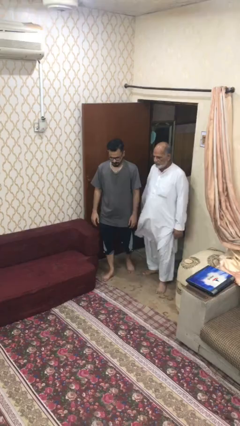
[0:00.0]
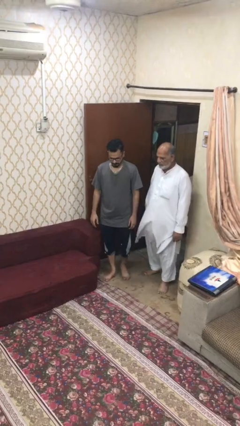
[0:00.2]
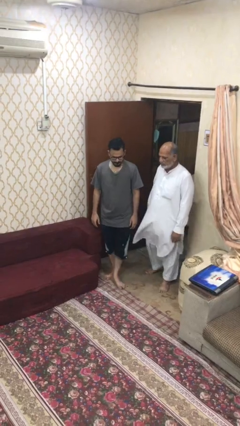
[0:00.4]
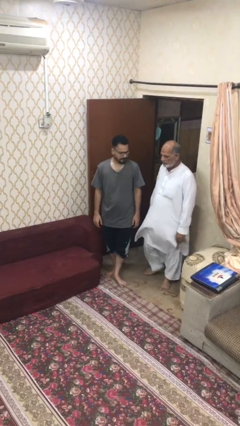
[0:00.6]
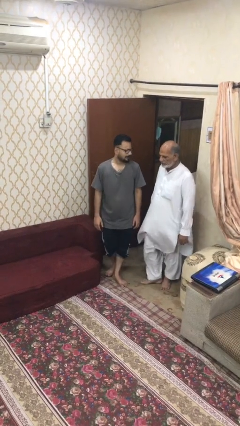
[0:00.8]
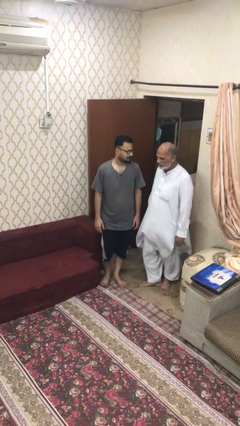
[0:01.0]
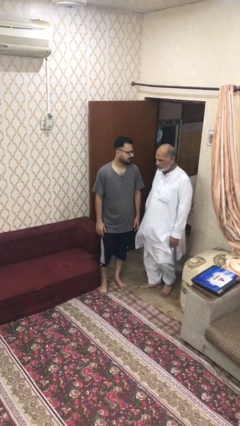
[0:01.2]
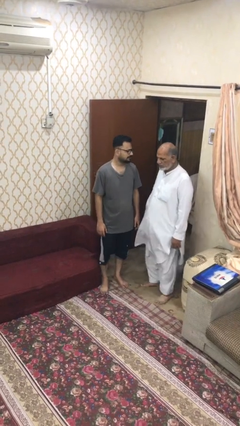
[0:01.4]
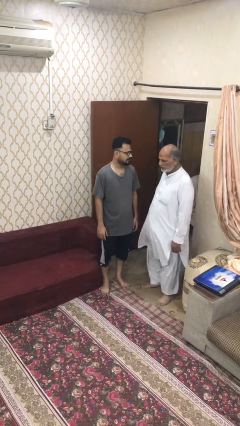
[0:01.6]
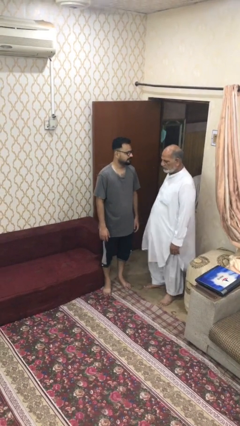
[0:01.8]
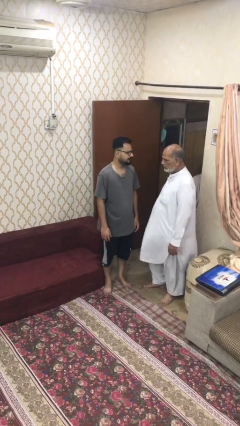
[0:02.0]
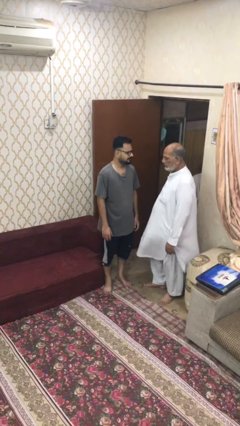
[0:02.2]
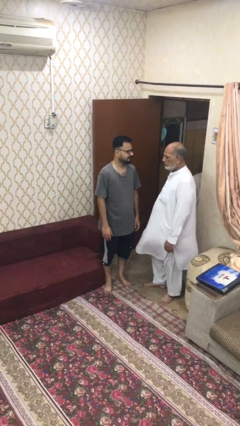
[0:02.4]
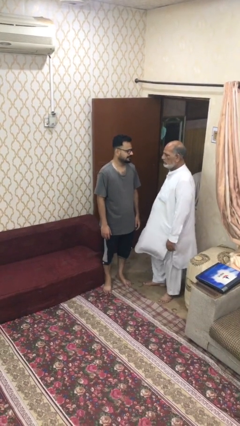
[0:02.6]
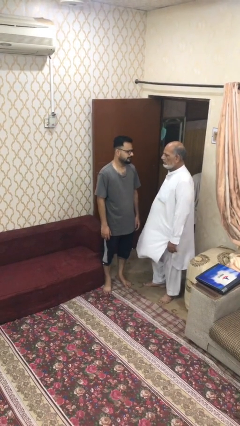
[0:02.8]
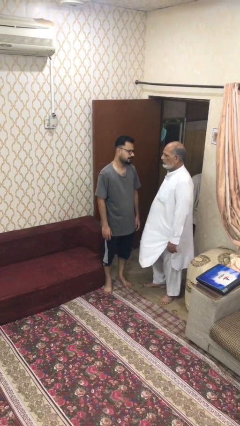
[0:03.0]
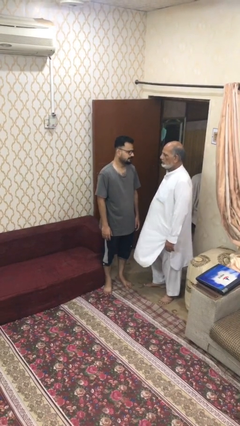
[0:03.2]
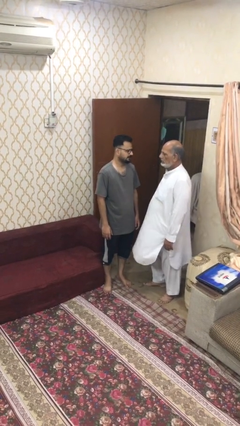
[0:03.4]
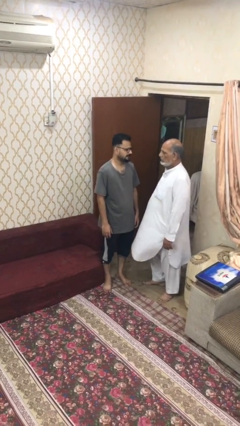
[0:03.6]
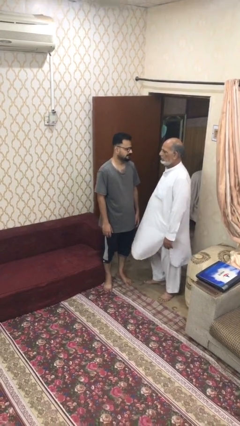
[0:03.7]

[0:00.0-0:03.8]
person talks to person

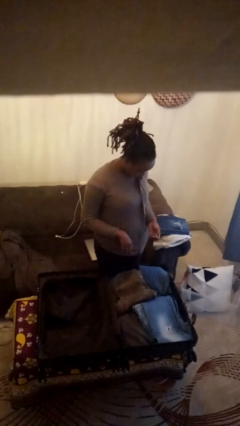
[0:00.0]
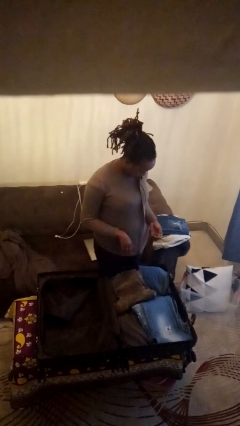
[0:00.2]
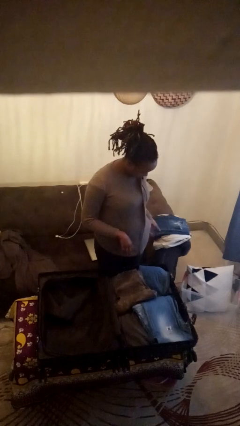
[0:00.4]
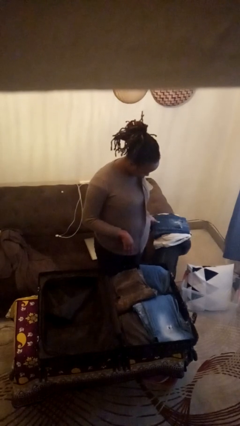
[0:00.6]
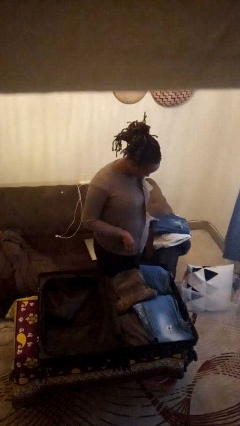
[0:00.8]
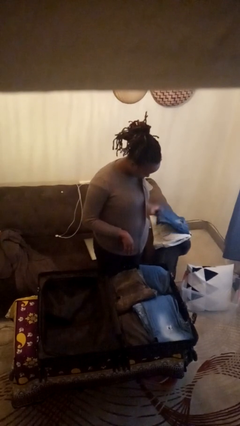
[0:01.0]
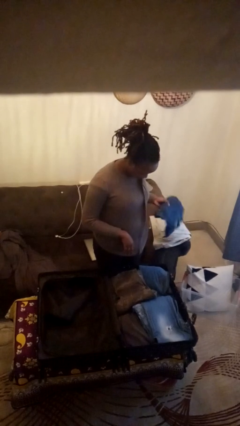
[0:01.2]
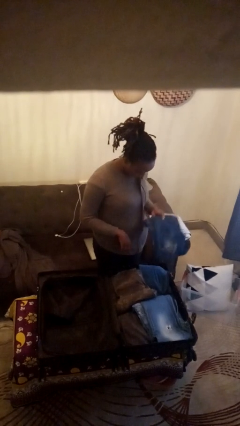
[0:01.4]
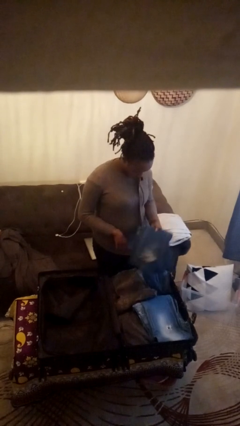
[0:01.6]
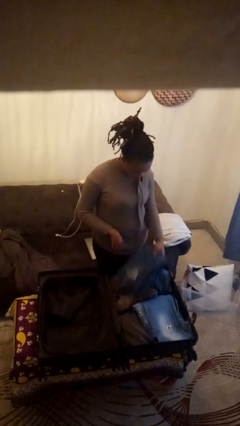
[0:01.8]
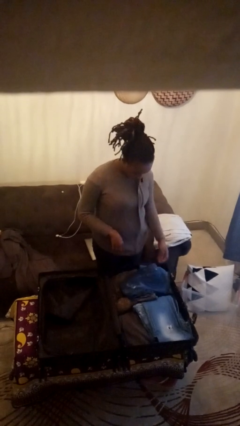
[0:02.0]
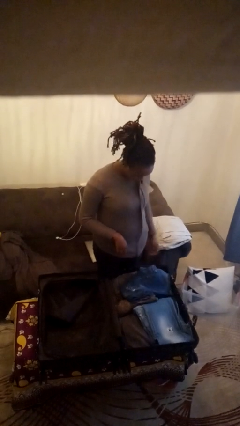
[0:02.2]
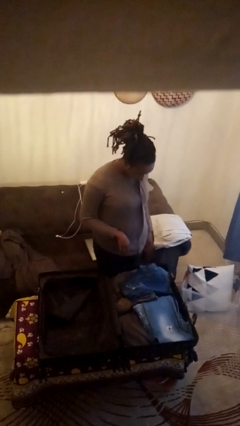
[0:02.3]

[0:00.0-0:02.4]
person loads clothes into suitcase

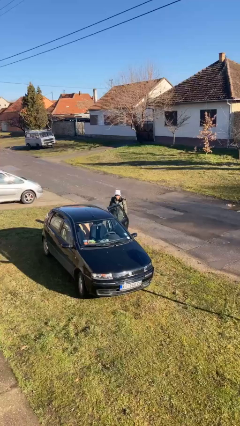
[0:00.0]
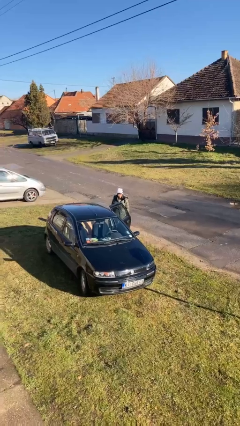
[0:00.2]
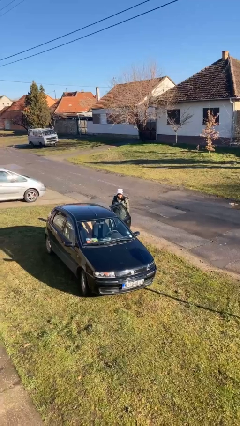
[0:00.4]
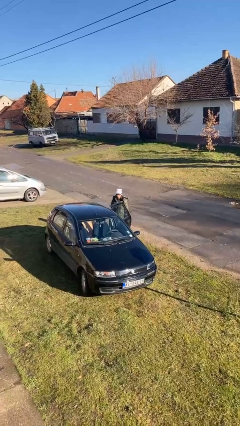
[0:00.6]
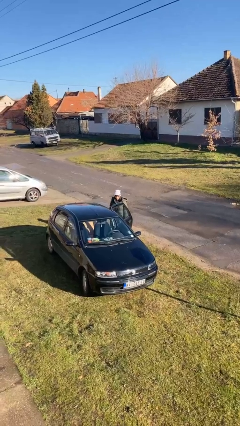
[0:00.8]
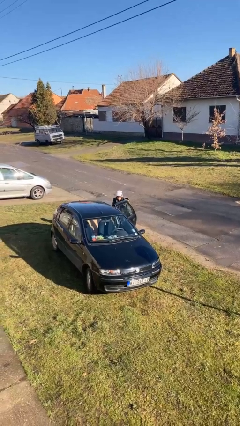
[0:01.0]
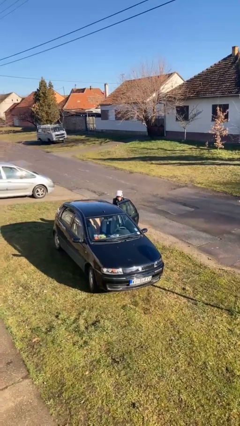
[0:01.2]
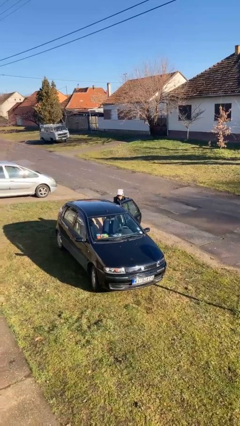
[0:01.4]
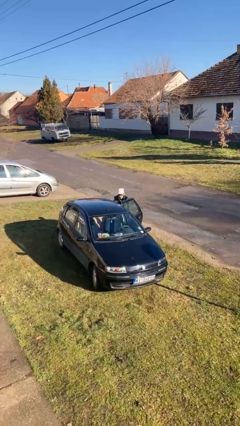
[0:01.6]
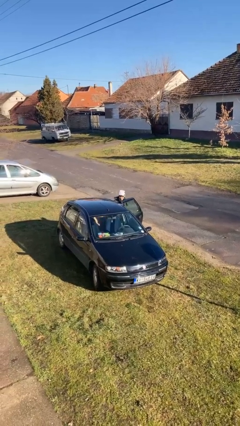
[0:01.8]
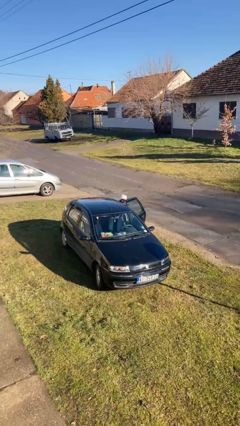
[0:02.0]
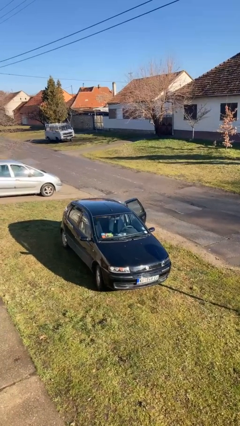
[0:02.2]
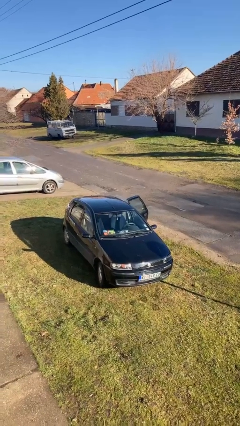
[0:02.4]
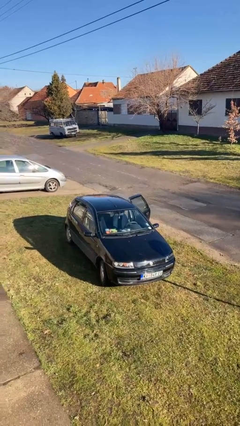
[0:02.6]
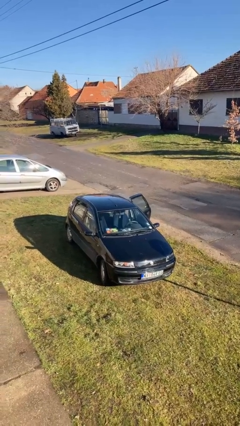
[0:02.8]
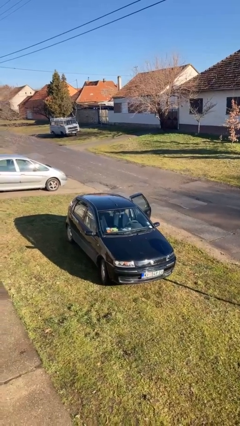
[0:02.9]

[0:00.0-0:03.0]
person enters car

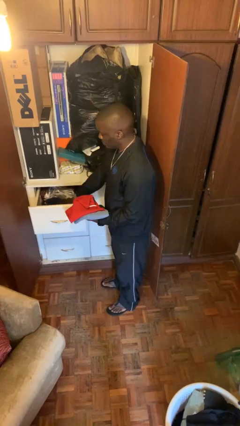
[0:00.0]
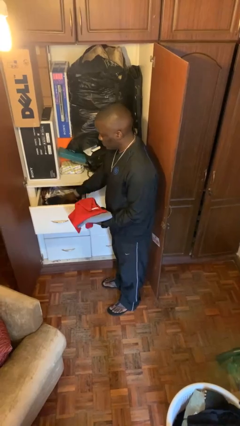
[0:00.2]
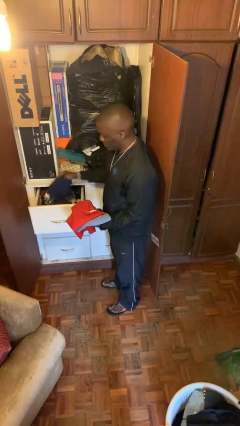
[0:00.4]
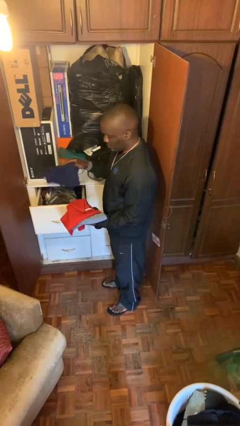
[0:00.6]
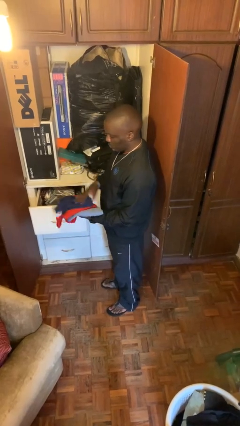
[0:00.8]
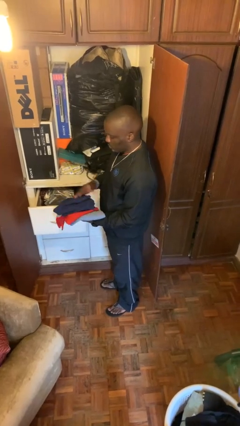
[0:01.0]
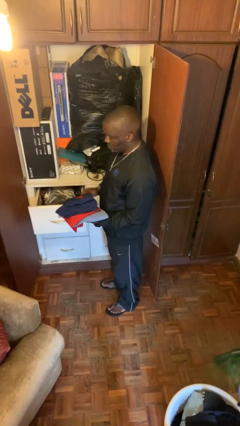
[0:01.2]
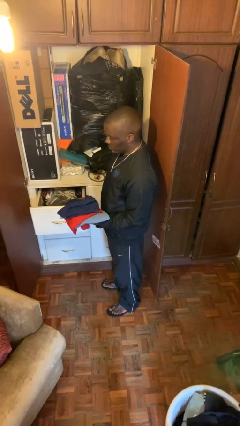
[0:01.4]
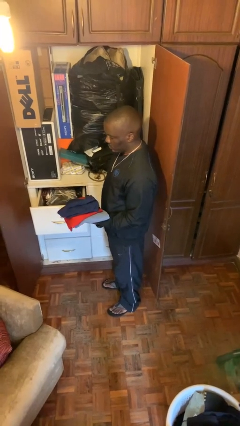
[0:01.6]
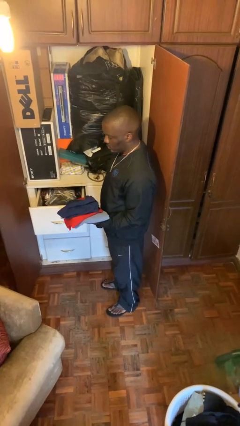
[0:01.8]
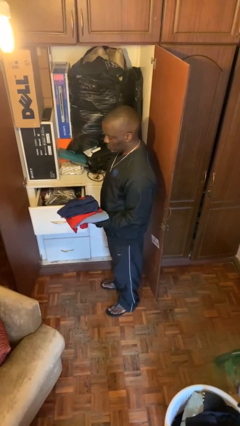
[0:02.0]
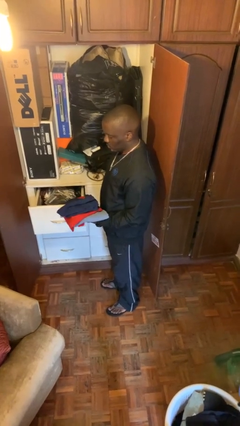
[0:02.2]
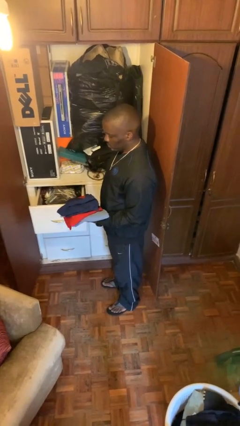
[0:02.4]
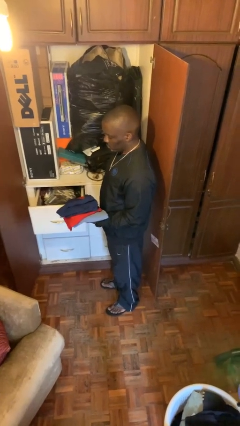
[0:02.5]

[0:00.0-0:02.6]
person takes clothes from dresser

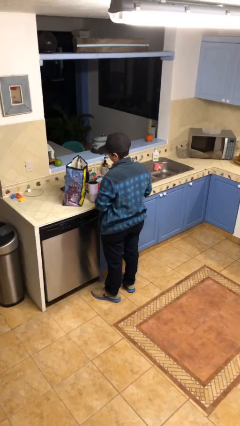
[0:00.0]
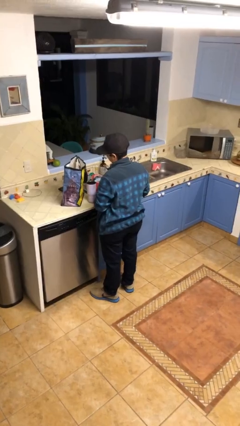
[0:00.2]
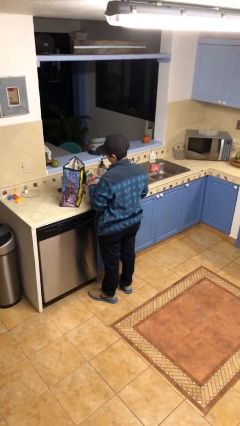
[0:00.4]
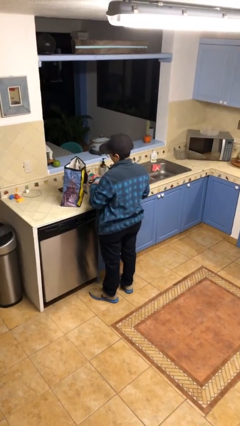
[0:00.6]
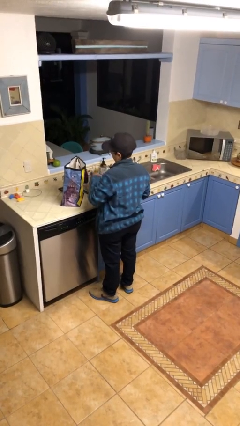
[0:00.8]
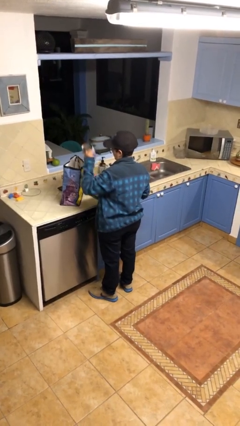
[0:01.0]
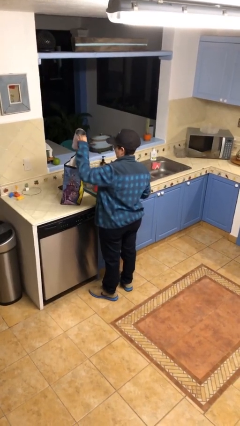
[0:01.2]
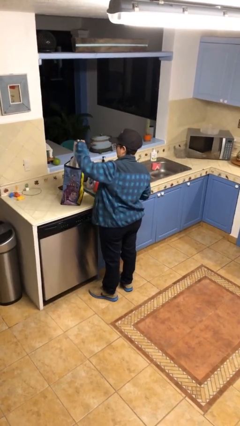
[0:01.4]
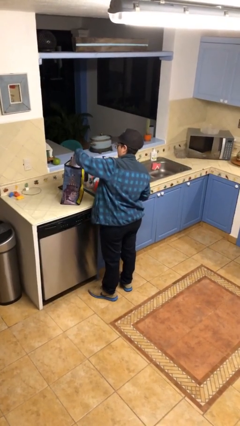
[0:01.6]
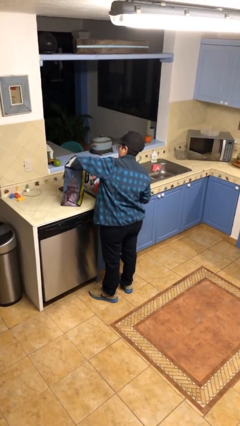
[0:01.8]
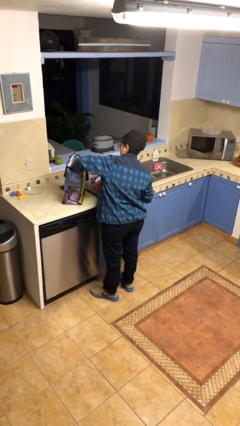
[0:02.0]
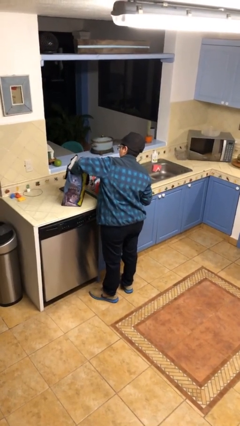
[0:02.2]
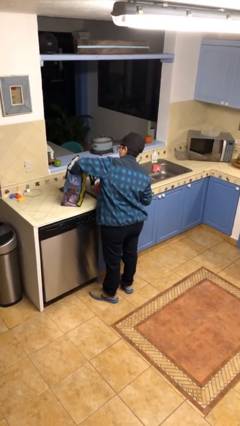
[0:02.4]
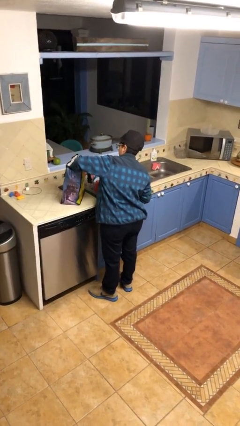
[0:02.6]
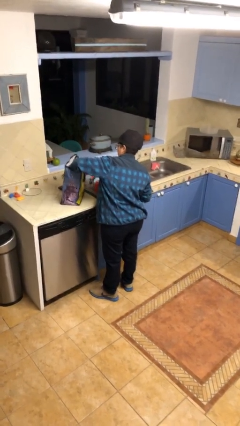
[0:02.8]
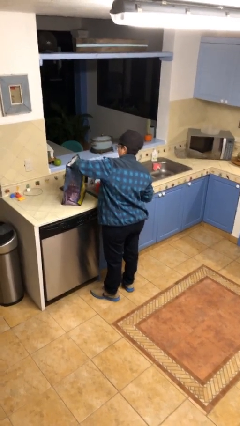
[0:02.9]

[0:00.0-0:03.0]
person puts object into bag

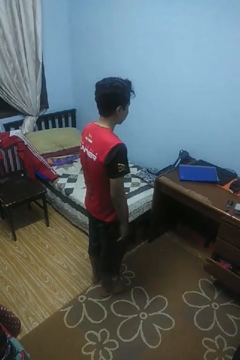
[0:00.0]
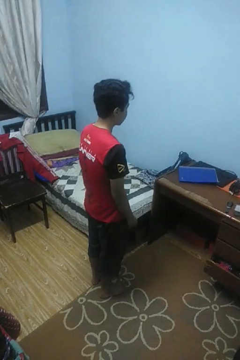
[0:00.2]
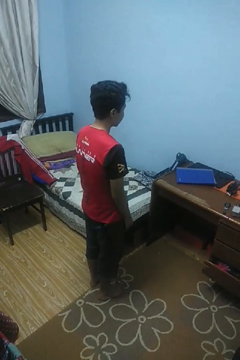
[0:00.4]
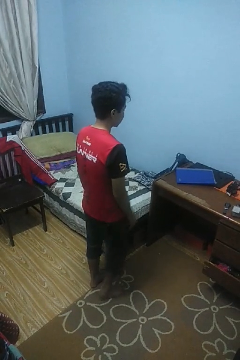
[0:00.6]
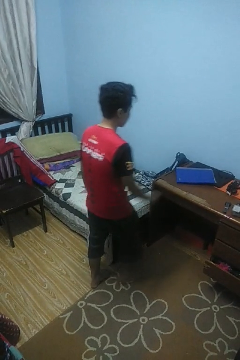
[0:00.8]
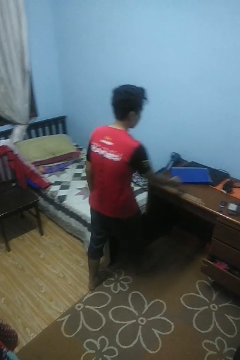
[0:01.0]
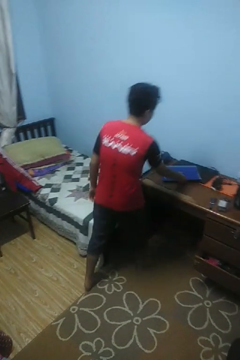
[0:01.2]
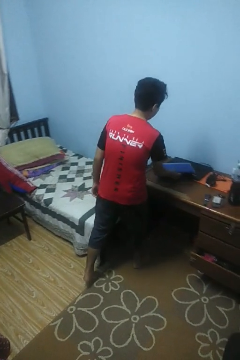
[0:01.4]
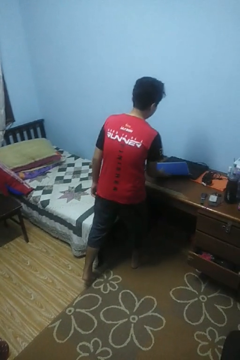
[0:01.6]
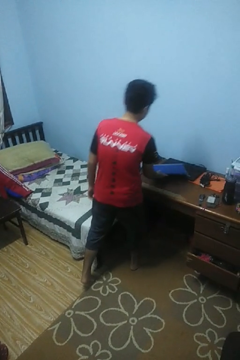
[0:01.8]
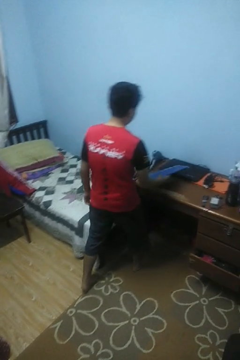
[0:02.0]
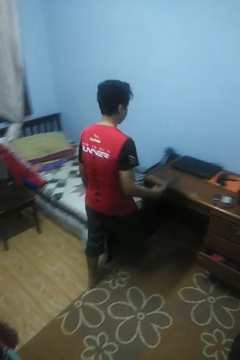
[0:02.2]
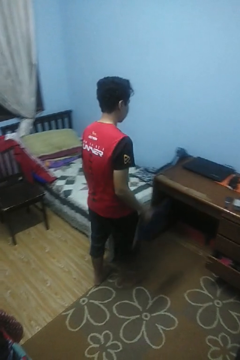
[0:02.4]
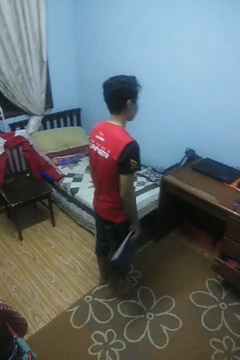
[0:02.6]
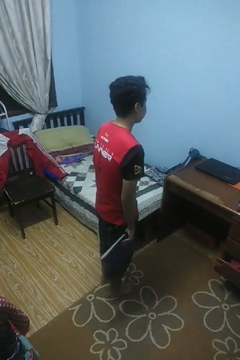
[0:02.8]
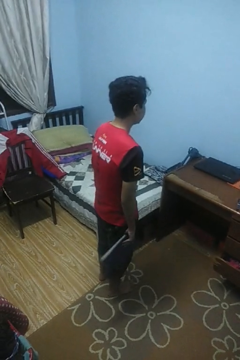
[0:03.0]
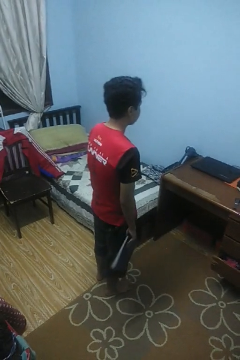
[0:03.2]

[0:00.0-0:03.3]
person picks up object from table

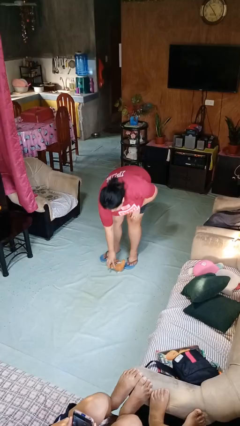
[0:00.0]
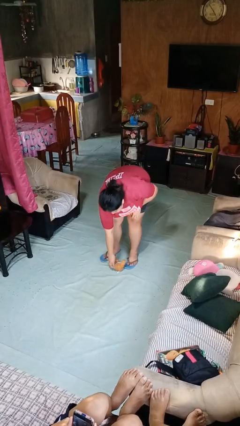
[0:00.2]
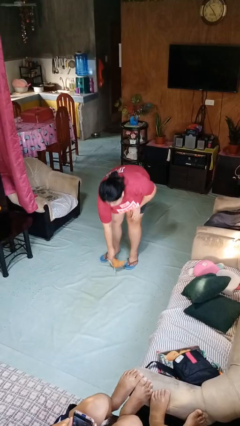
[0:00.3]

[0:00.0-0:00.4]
person picks up object from floor
